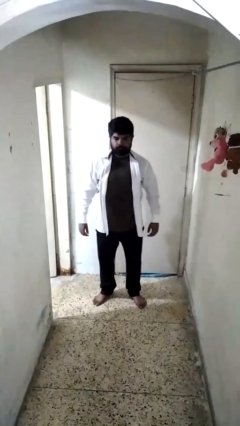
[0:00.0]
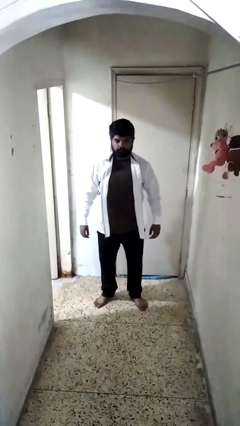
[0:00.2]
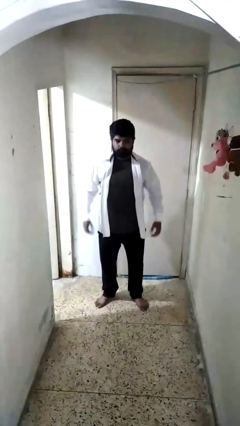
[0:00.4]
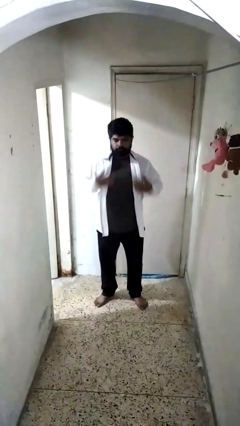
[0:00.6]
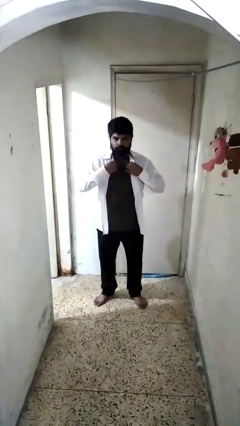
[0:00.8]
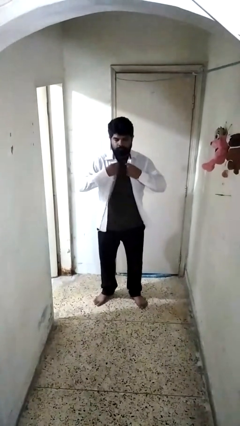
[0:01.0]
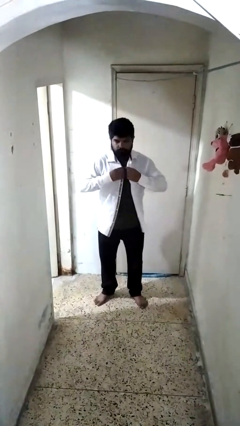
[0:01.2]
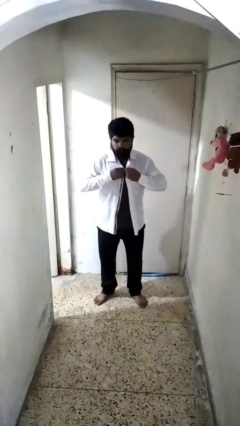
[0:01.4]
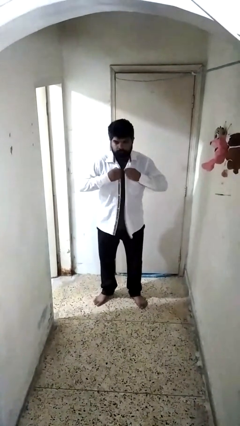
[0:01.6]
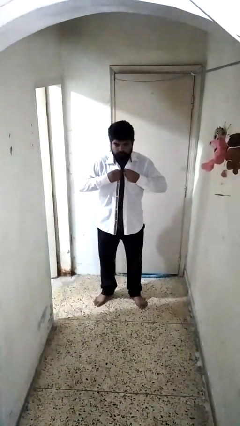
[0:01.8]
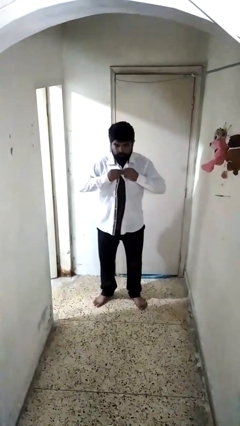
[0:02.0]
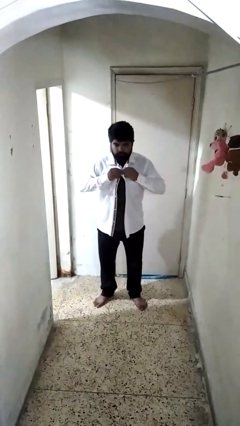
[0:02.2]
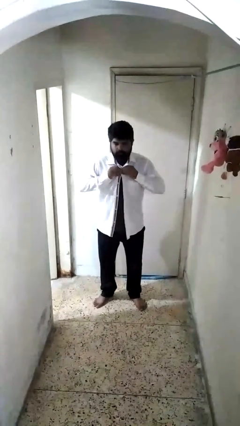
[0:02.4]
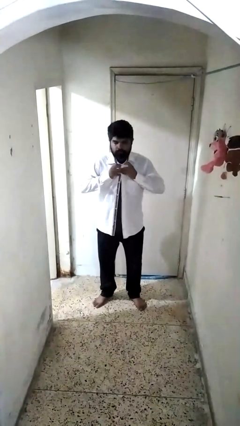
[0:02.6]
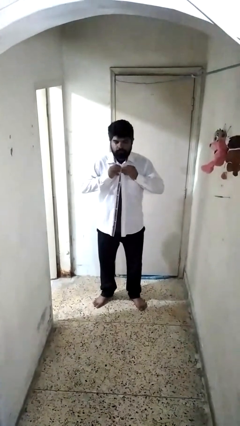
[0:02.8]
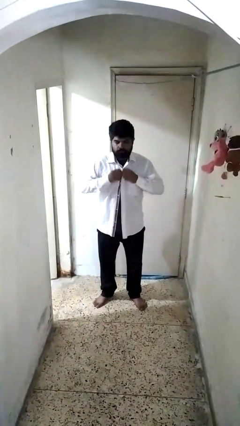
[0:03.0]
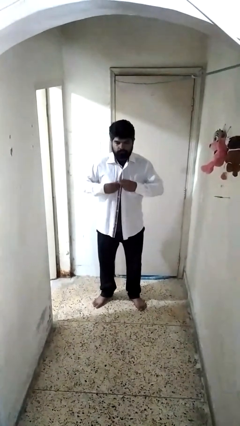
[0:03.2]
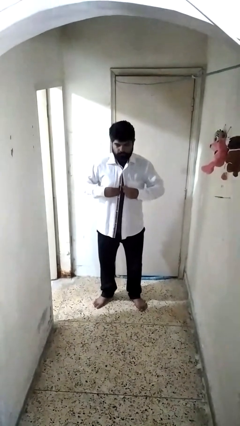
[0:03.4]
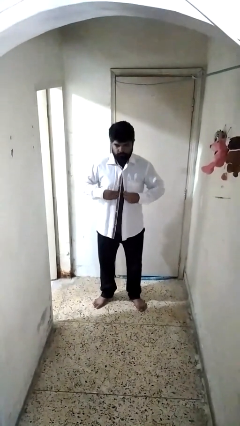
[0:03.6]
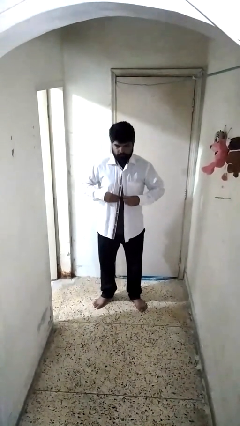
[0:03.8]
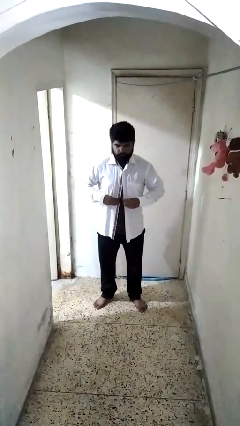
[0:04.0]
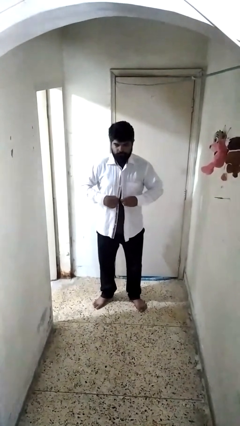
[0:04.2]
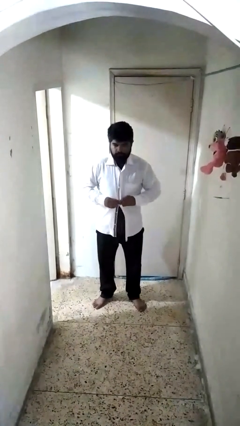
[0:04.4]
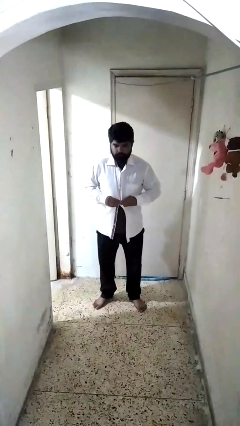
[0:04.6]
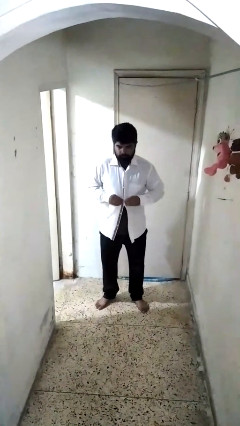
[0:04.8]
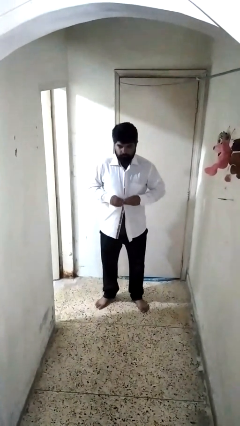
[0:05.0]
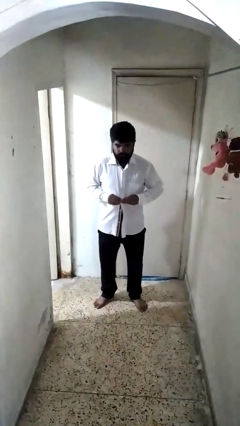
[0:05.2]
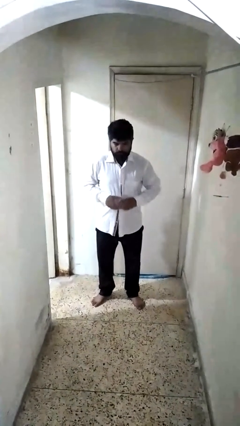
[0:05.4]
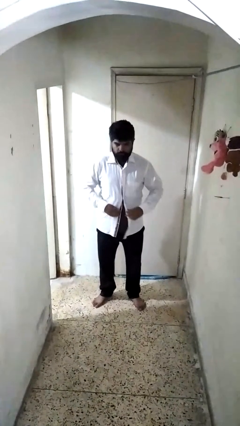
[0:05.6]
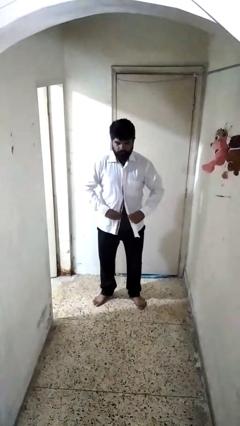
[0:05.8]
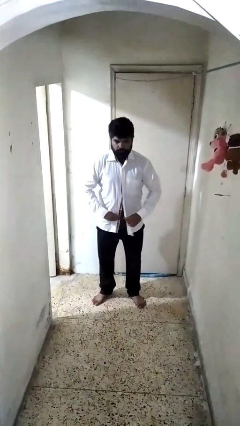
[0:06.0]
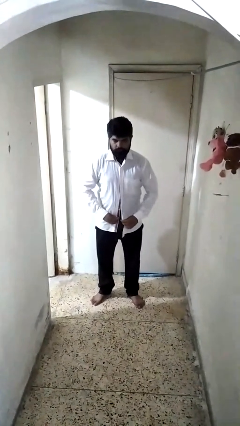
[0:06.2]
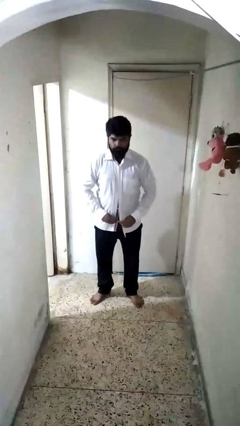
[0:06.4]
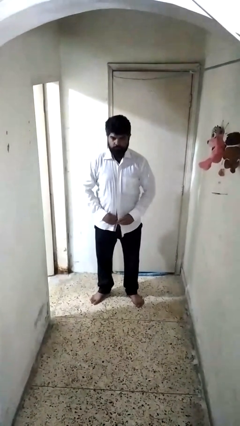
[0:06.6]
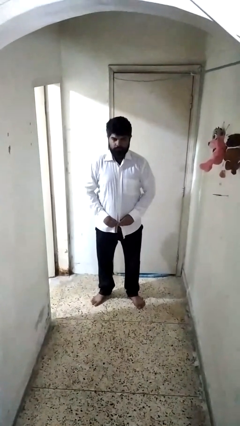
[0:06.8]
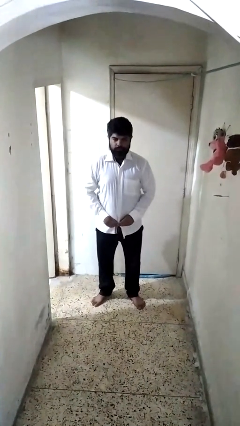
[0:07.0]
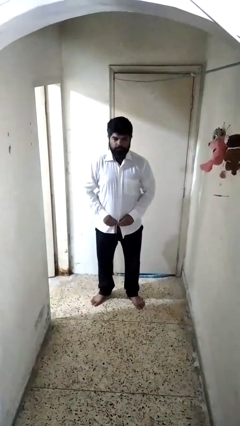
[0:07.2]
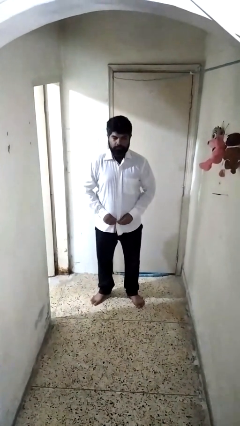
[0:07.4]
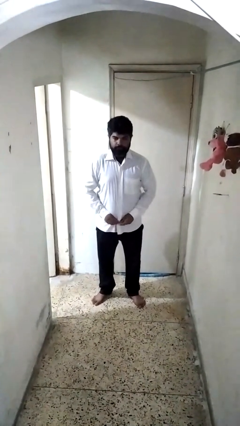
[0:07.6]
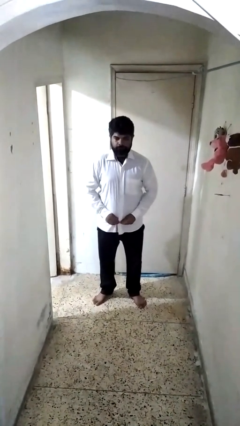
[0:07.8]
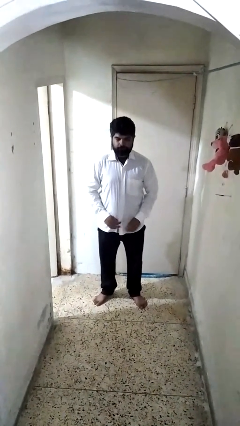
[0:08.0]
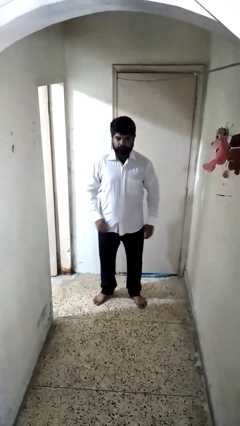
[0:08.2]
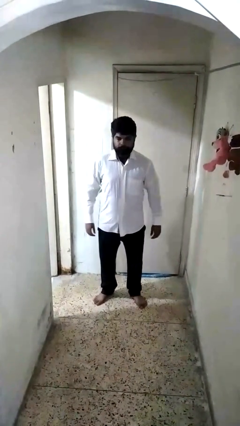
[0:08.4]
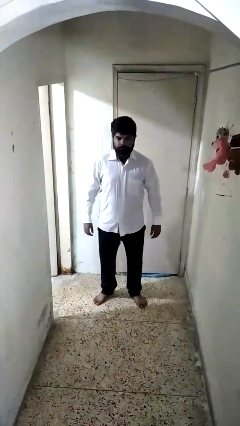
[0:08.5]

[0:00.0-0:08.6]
person buttons shirt

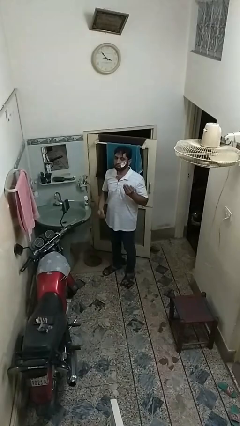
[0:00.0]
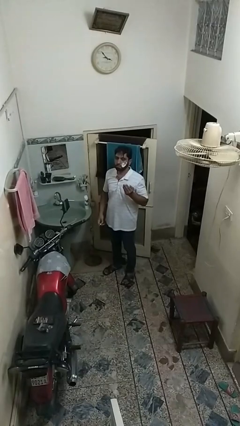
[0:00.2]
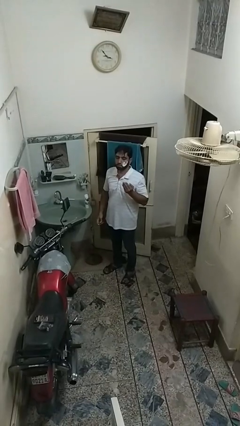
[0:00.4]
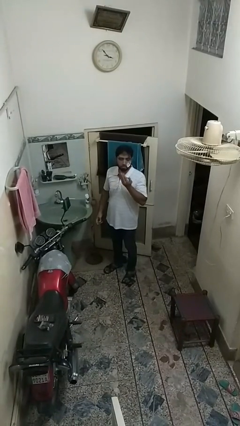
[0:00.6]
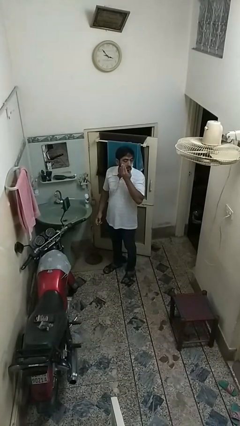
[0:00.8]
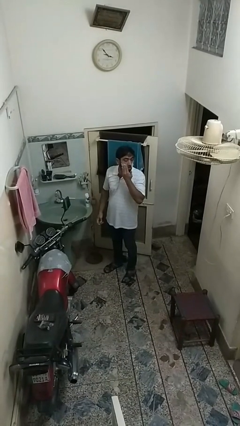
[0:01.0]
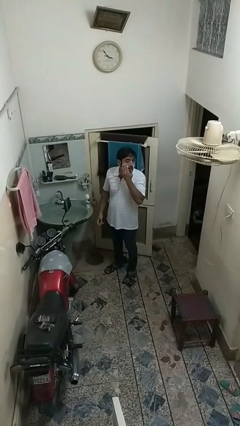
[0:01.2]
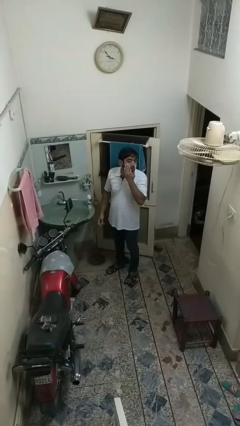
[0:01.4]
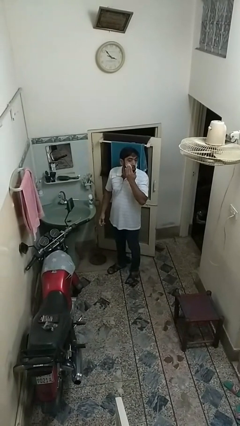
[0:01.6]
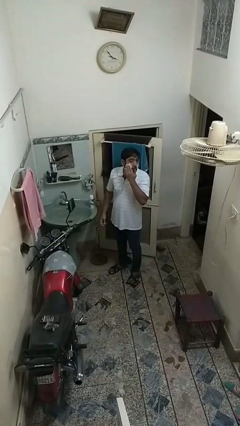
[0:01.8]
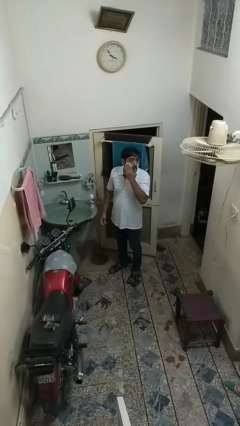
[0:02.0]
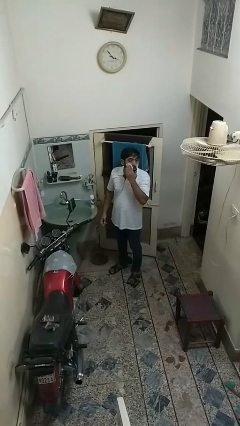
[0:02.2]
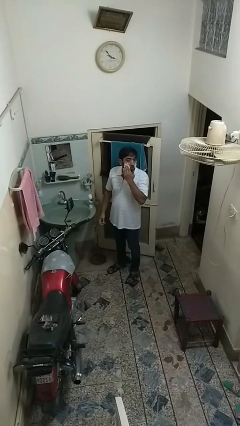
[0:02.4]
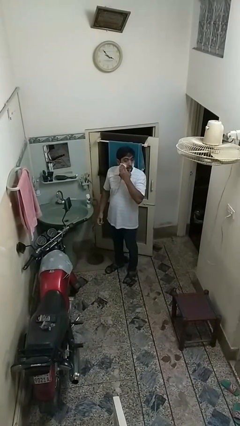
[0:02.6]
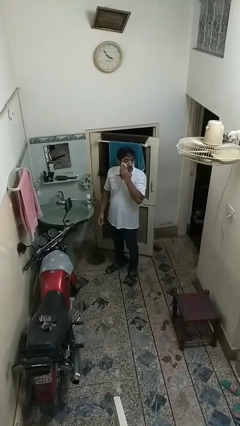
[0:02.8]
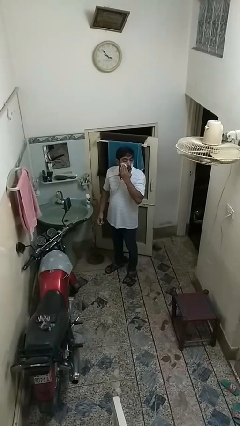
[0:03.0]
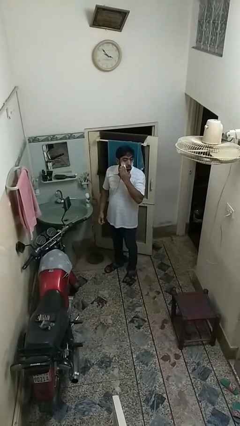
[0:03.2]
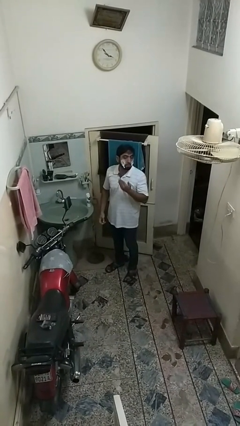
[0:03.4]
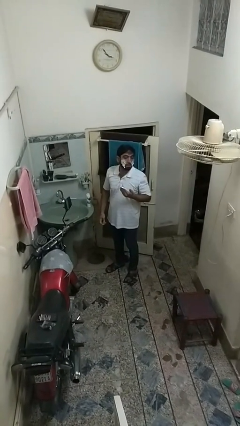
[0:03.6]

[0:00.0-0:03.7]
person applies shaving cream

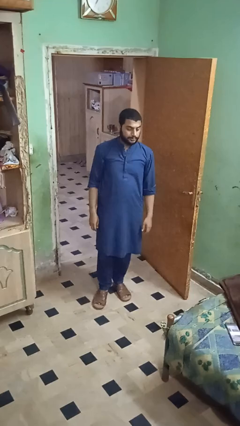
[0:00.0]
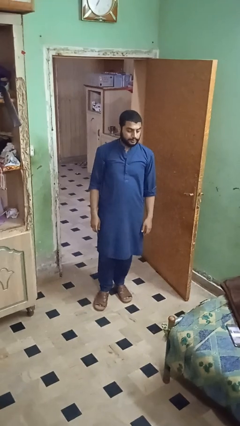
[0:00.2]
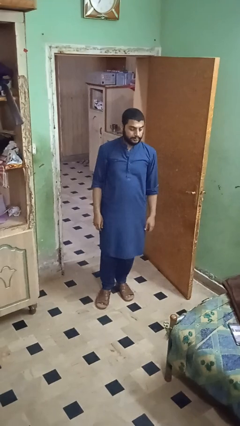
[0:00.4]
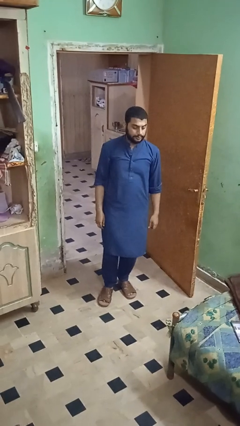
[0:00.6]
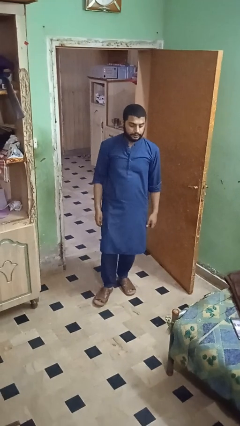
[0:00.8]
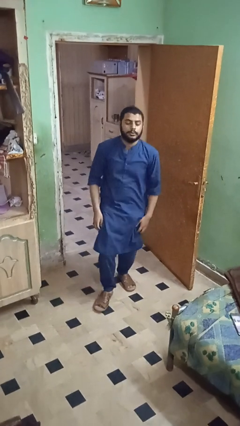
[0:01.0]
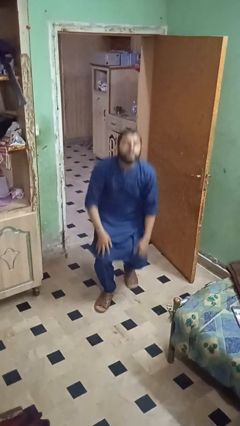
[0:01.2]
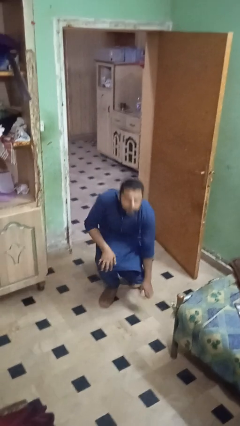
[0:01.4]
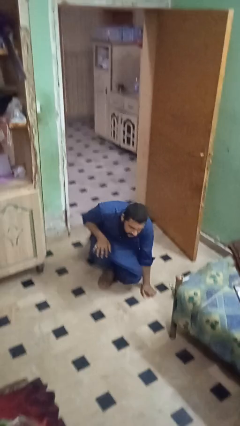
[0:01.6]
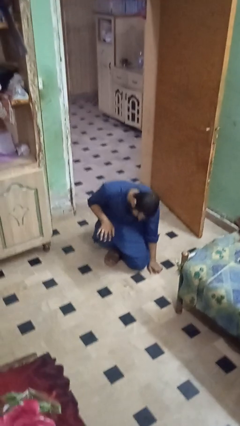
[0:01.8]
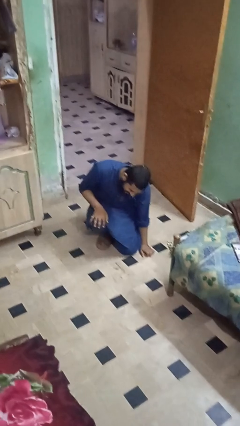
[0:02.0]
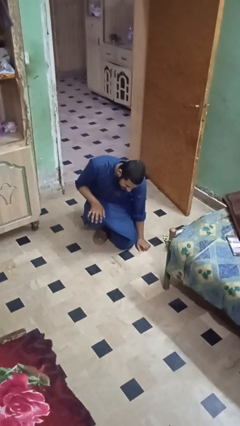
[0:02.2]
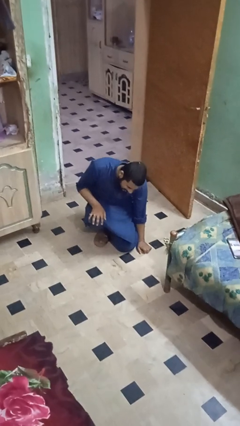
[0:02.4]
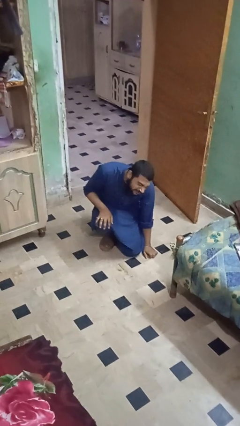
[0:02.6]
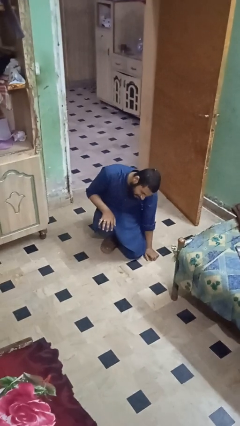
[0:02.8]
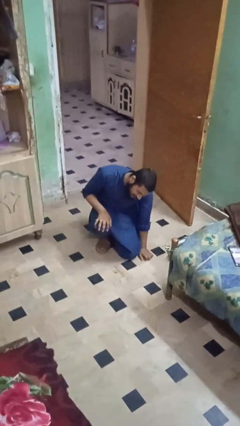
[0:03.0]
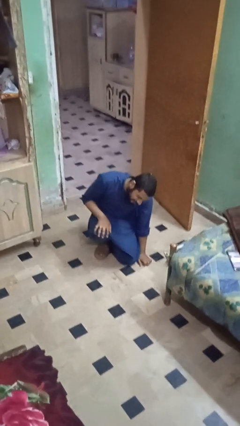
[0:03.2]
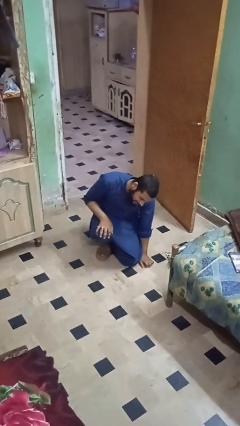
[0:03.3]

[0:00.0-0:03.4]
person trips on object on floor

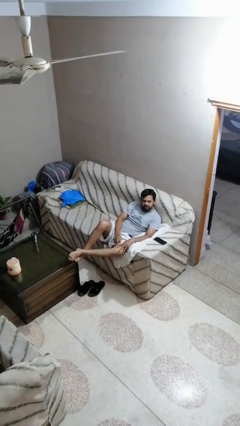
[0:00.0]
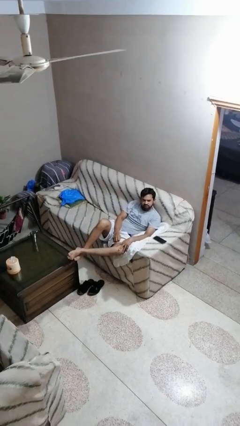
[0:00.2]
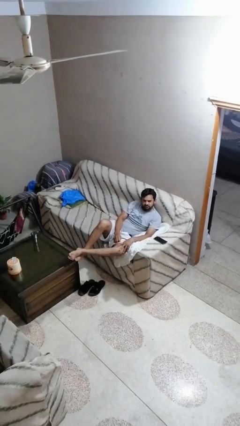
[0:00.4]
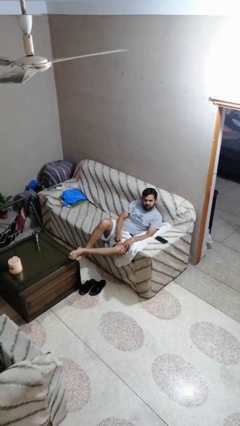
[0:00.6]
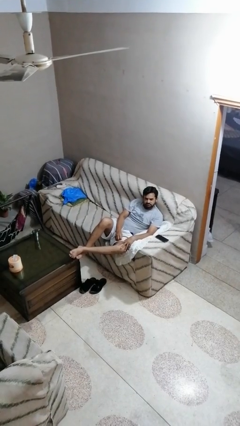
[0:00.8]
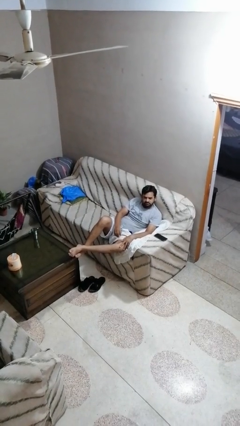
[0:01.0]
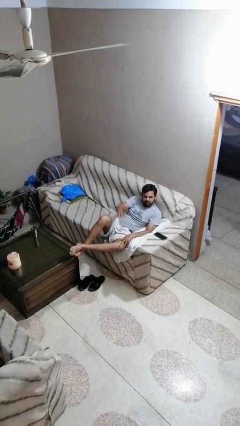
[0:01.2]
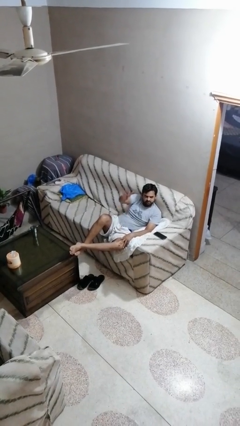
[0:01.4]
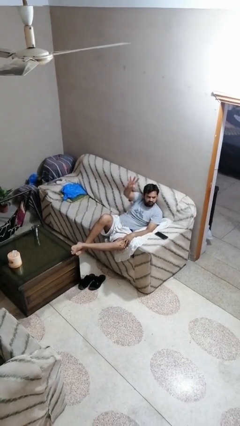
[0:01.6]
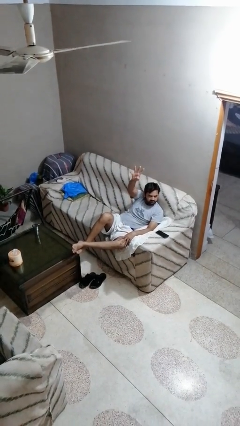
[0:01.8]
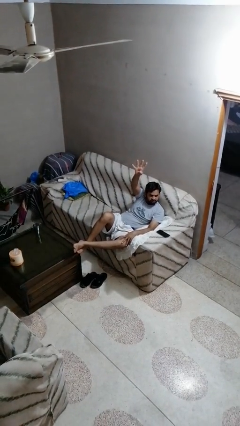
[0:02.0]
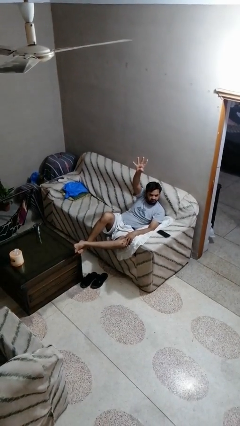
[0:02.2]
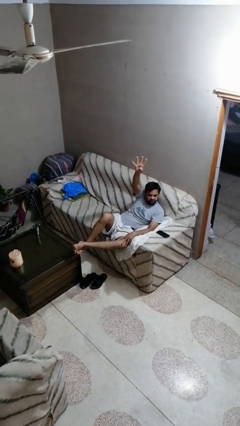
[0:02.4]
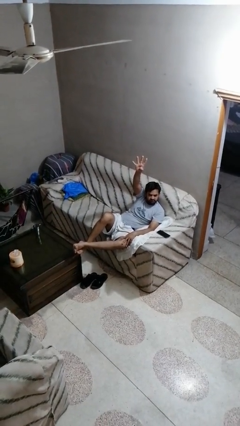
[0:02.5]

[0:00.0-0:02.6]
person gestures number four
